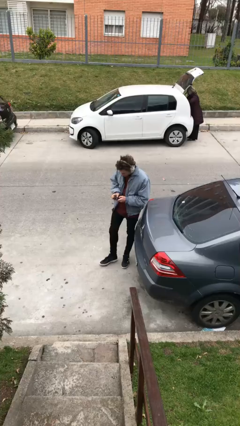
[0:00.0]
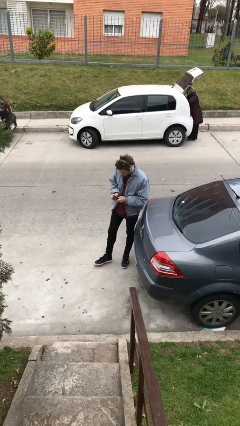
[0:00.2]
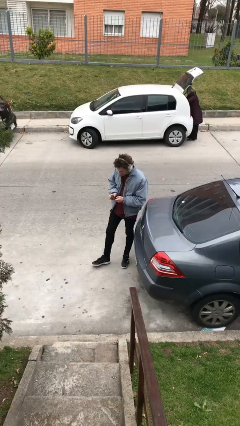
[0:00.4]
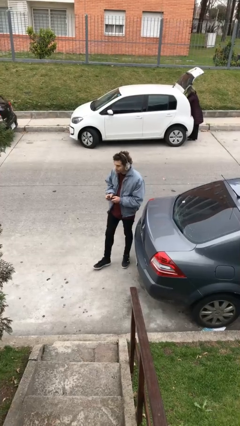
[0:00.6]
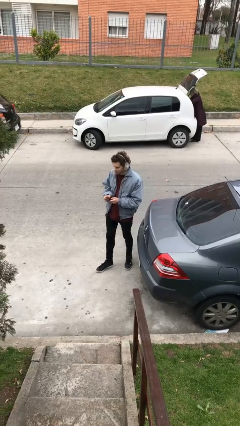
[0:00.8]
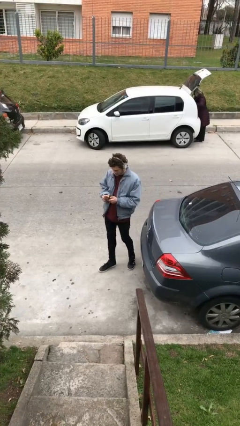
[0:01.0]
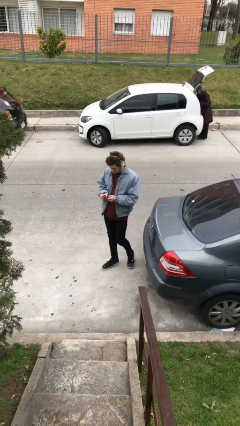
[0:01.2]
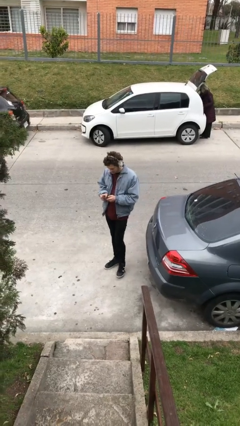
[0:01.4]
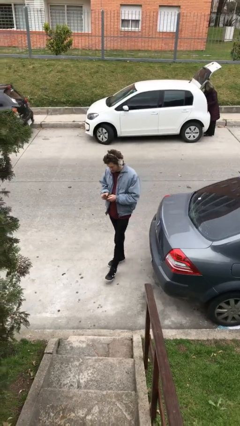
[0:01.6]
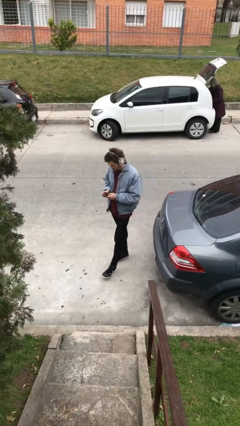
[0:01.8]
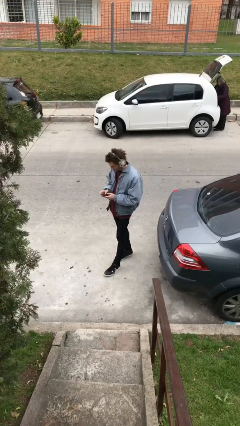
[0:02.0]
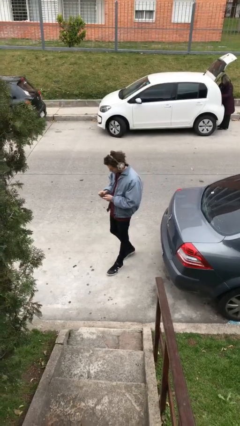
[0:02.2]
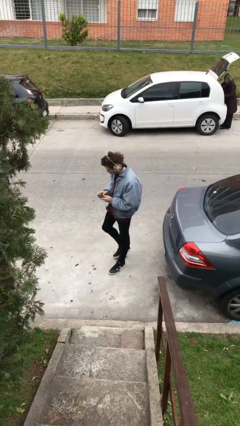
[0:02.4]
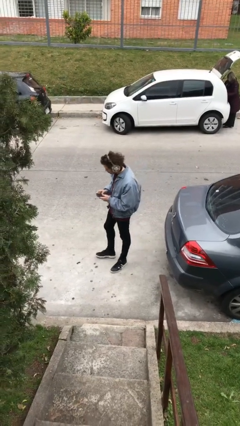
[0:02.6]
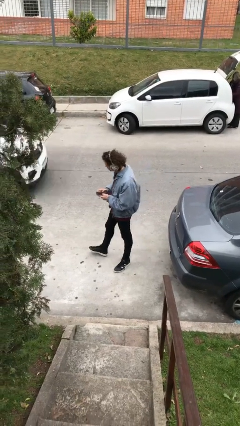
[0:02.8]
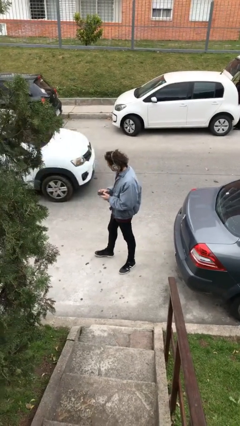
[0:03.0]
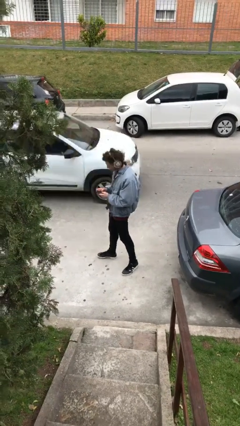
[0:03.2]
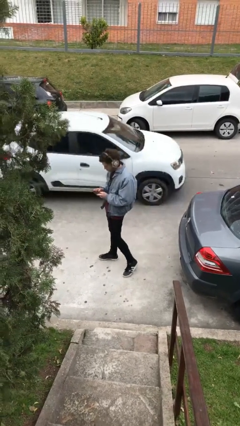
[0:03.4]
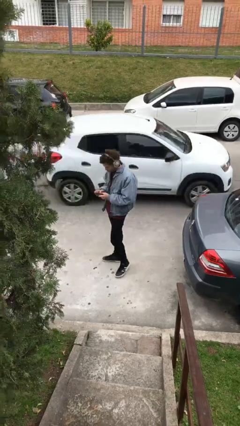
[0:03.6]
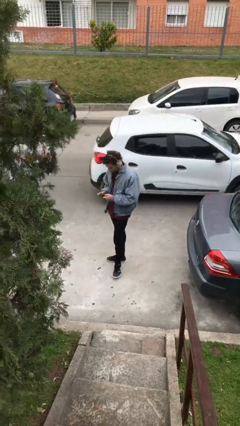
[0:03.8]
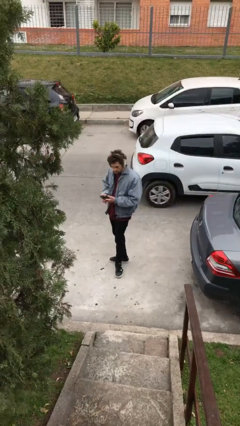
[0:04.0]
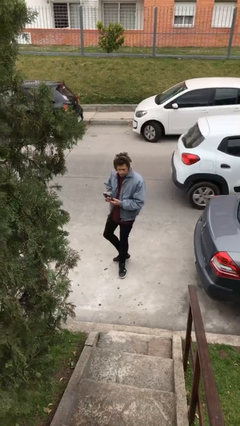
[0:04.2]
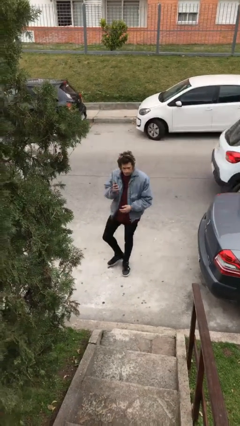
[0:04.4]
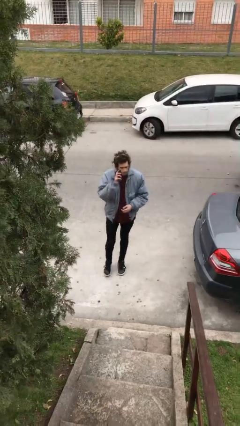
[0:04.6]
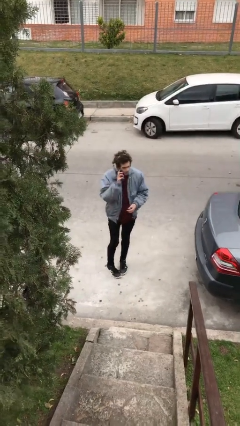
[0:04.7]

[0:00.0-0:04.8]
person texts on phone

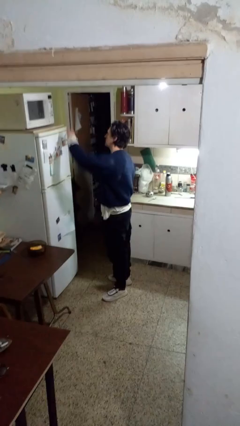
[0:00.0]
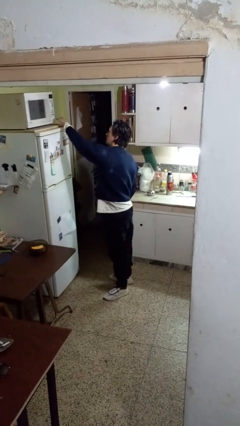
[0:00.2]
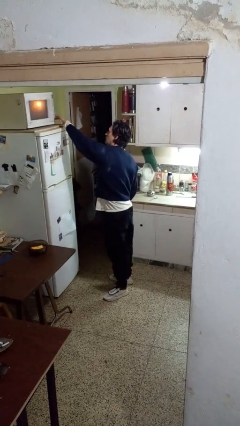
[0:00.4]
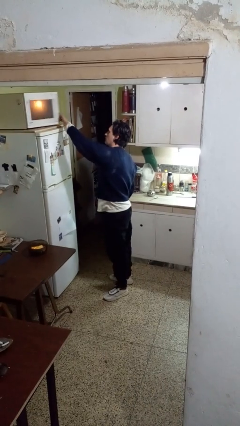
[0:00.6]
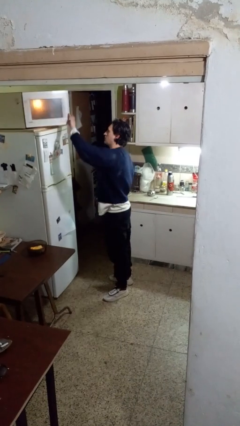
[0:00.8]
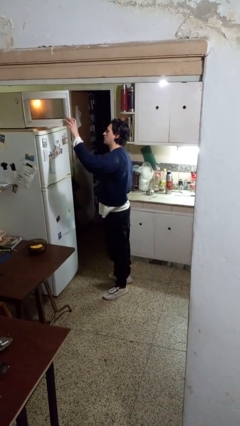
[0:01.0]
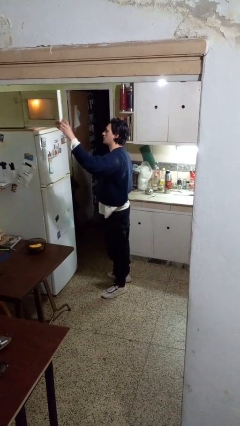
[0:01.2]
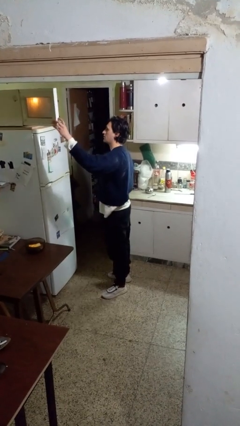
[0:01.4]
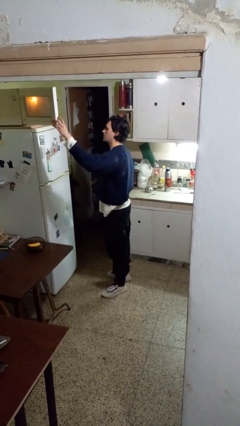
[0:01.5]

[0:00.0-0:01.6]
person opens microwave

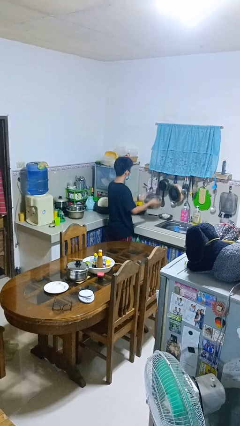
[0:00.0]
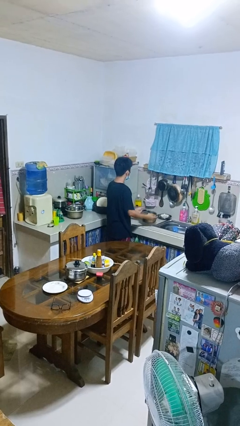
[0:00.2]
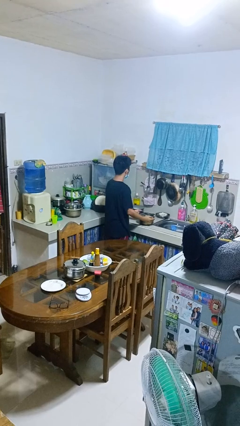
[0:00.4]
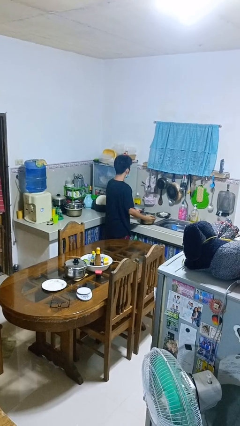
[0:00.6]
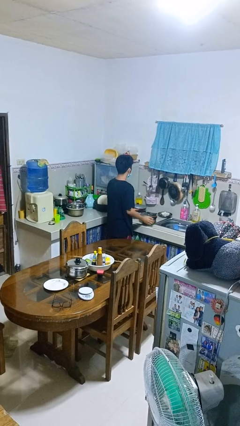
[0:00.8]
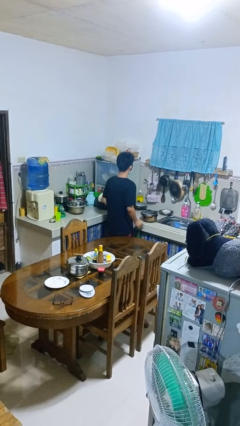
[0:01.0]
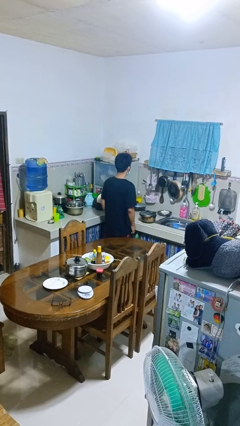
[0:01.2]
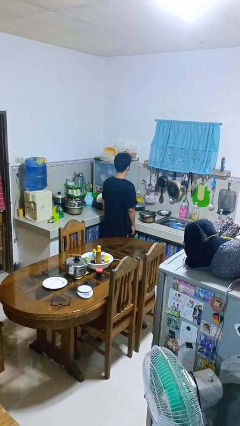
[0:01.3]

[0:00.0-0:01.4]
person puts down object on countertop

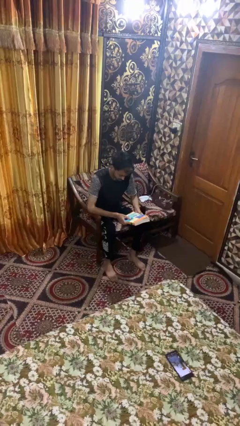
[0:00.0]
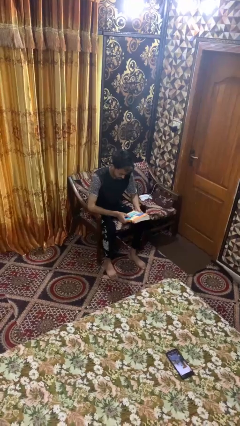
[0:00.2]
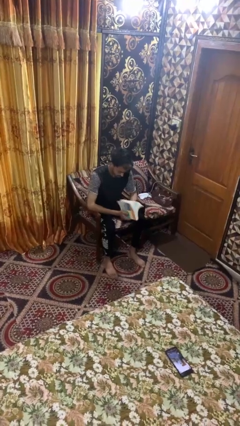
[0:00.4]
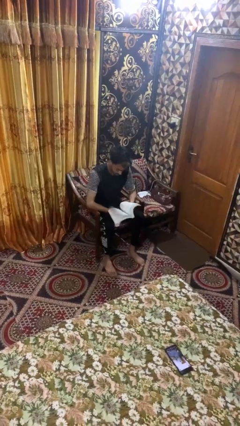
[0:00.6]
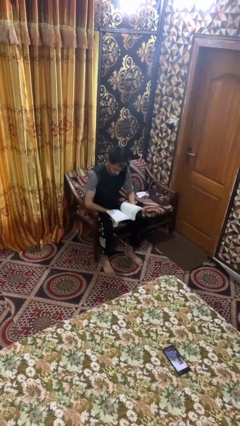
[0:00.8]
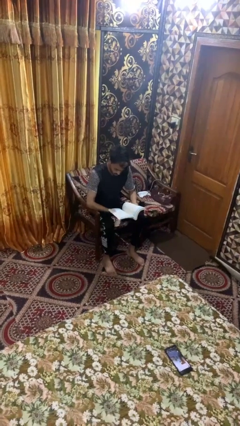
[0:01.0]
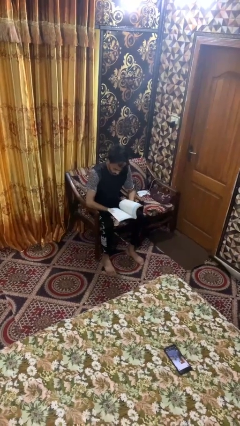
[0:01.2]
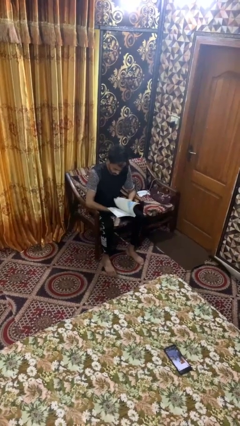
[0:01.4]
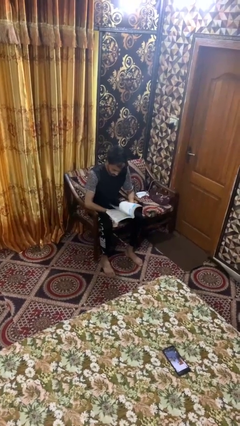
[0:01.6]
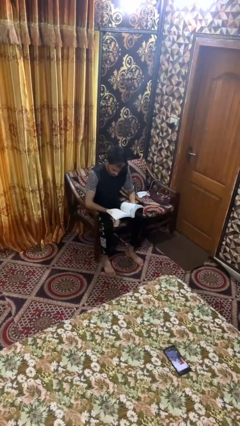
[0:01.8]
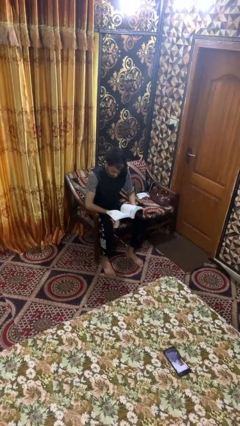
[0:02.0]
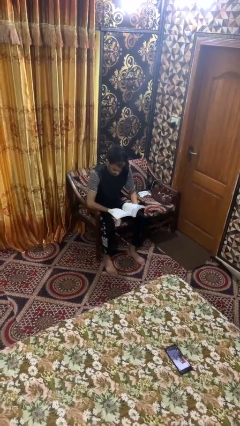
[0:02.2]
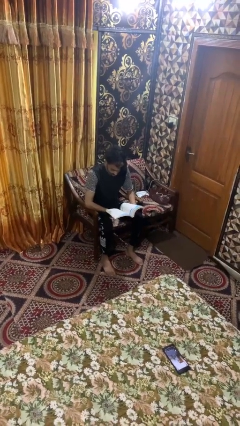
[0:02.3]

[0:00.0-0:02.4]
person reads book

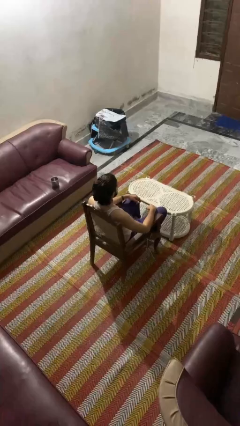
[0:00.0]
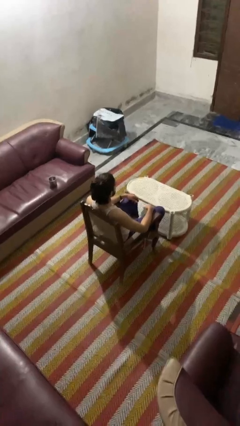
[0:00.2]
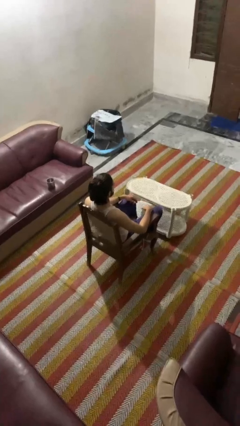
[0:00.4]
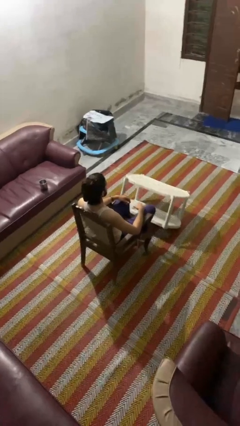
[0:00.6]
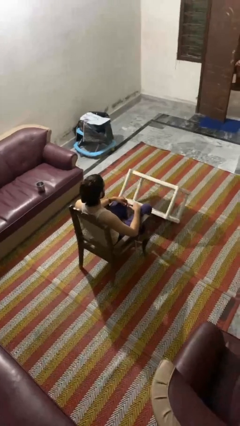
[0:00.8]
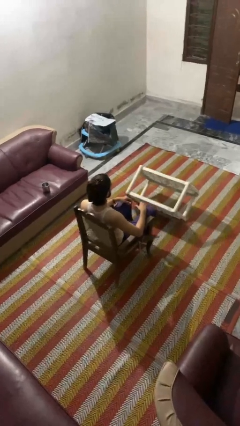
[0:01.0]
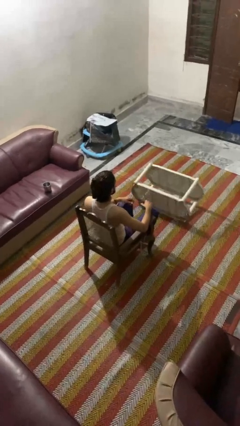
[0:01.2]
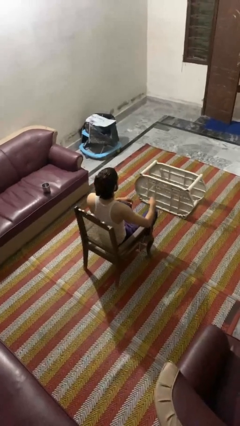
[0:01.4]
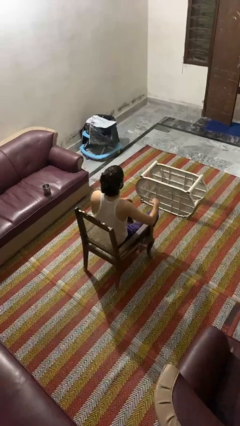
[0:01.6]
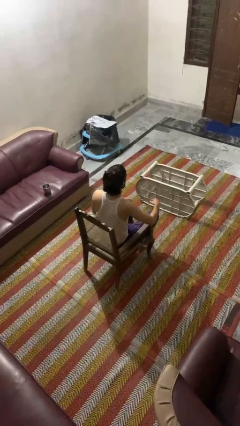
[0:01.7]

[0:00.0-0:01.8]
person knocks over furniture

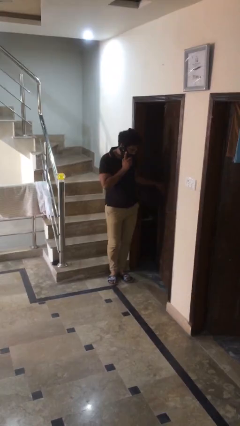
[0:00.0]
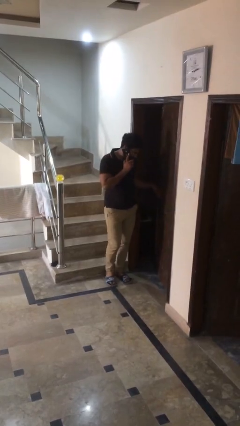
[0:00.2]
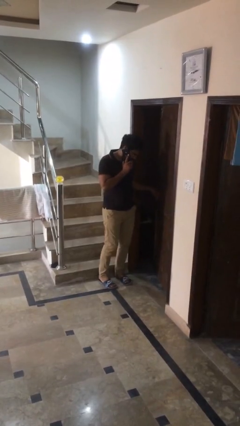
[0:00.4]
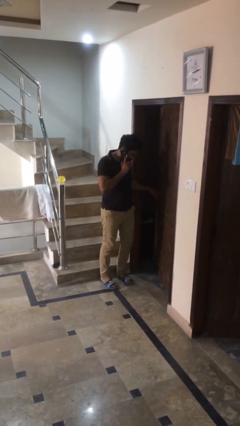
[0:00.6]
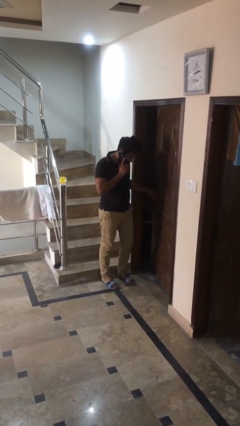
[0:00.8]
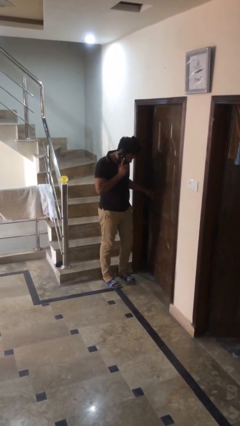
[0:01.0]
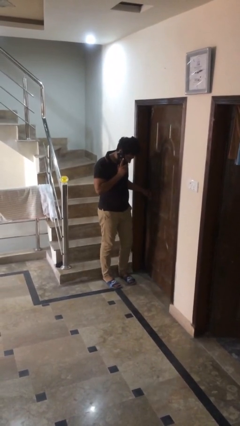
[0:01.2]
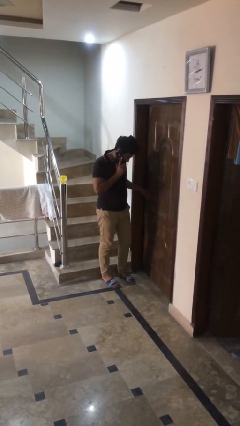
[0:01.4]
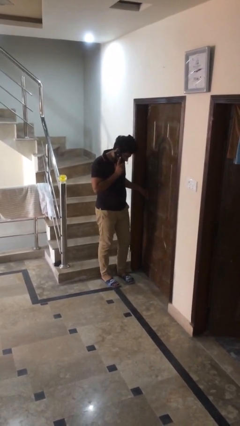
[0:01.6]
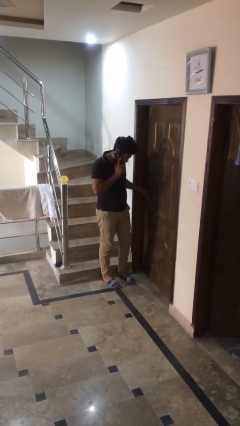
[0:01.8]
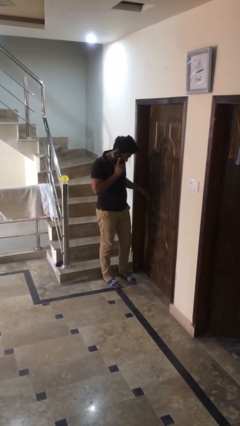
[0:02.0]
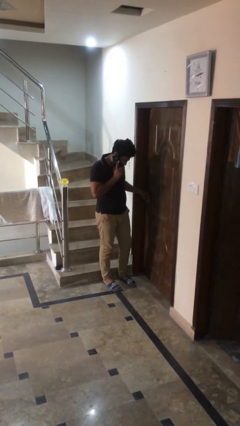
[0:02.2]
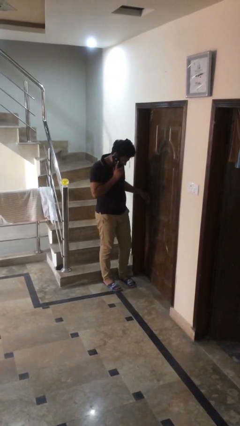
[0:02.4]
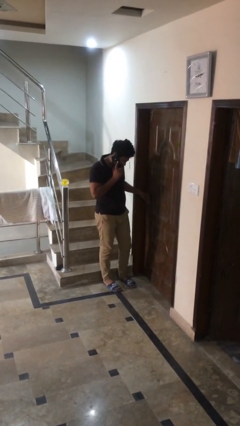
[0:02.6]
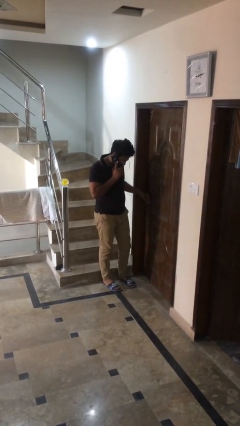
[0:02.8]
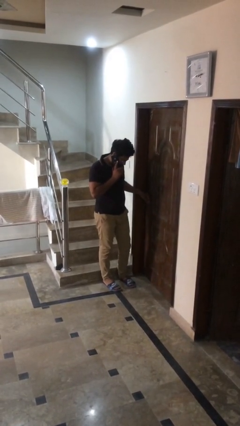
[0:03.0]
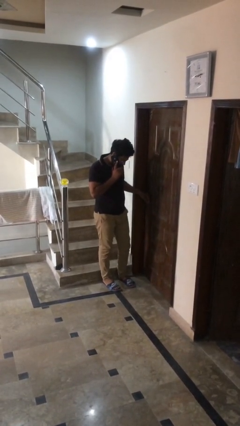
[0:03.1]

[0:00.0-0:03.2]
person closes facility door

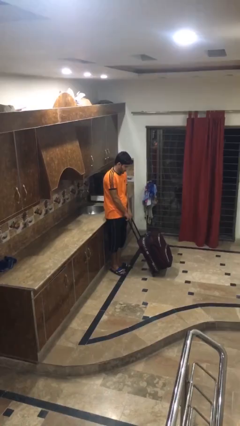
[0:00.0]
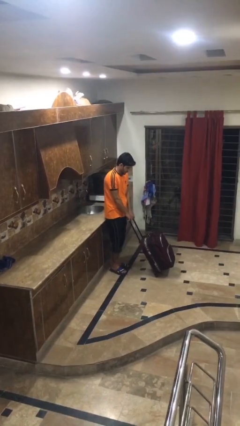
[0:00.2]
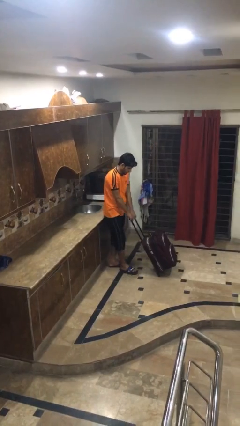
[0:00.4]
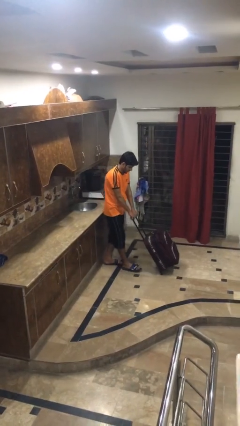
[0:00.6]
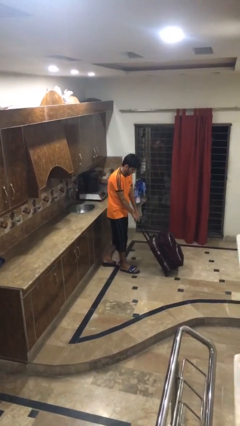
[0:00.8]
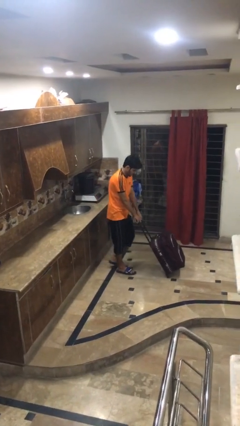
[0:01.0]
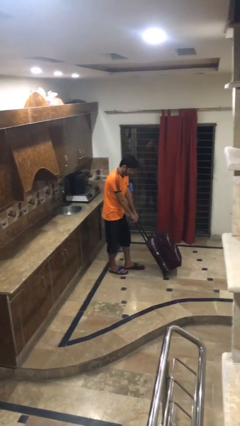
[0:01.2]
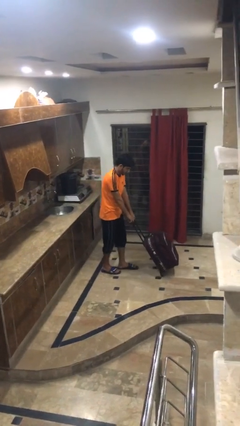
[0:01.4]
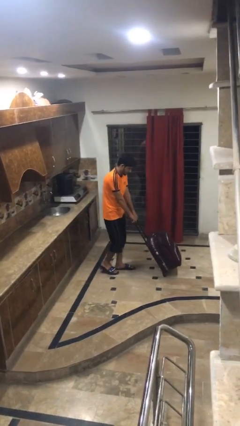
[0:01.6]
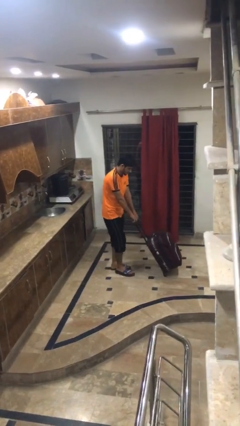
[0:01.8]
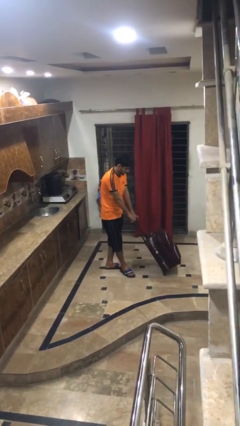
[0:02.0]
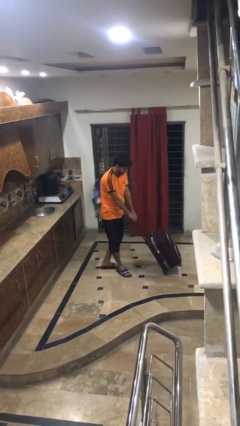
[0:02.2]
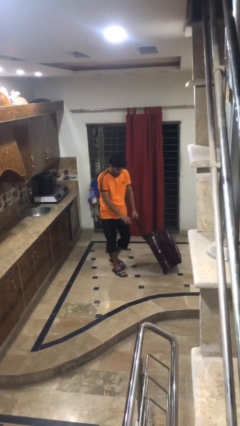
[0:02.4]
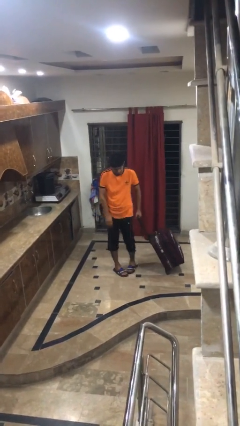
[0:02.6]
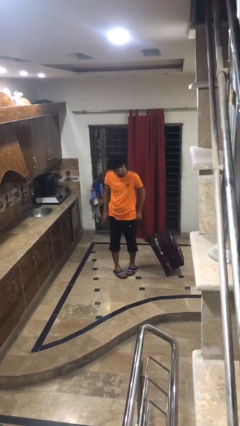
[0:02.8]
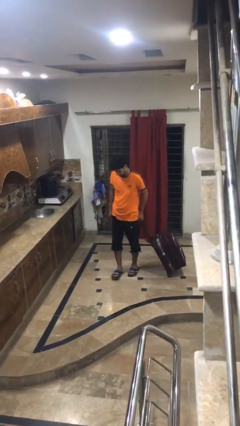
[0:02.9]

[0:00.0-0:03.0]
person pushes wheeled cart
